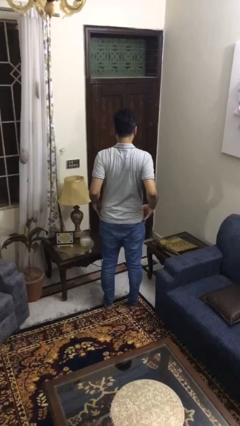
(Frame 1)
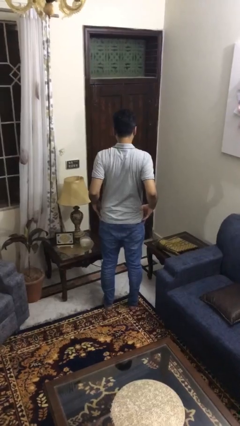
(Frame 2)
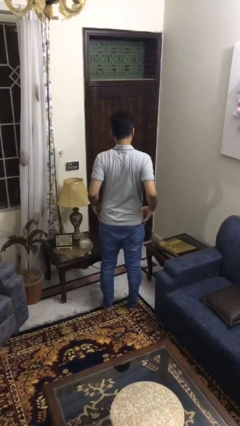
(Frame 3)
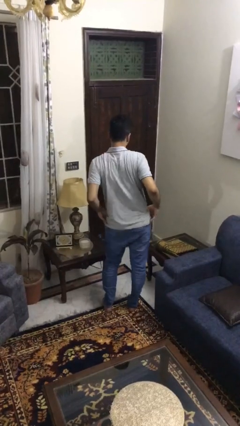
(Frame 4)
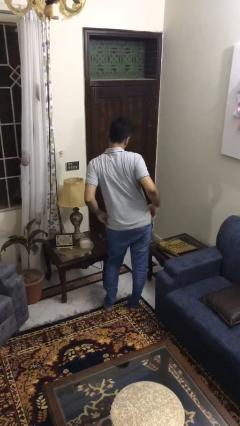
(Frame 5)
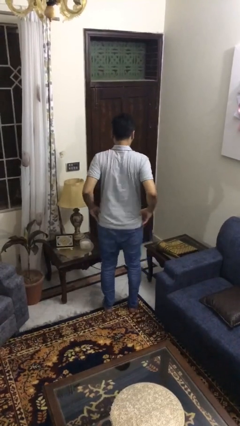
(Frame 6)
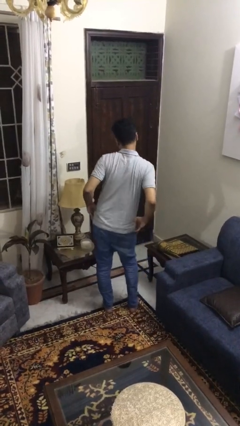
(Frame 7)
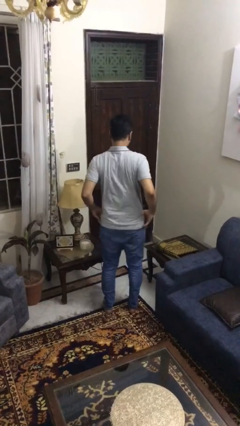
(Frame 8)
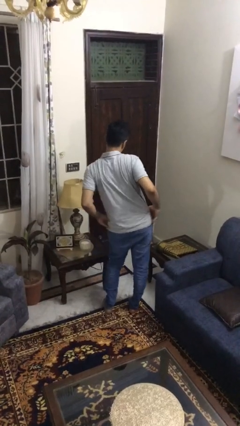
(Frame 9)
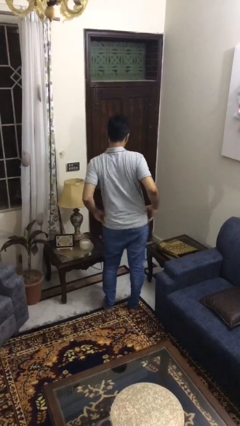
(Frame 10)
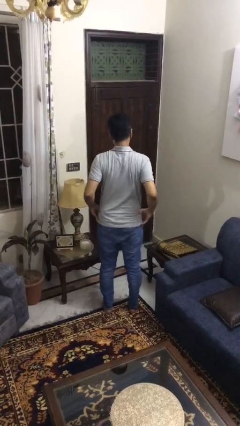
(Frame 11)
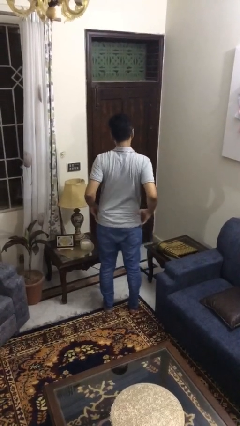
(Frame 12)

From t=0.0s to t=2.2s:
person wiggles hips

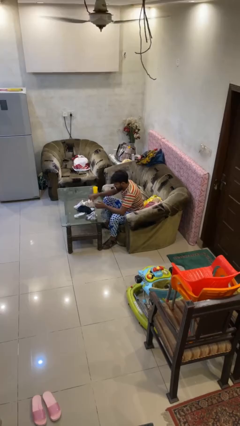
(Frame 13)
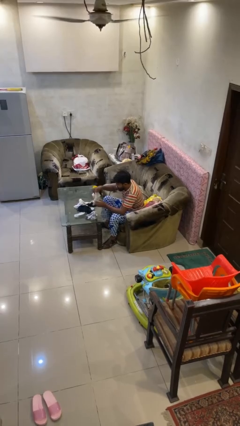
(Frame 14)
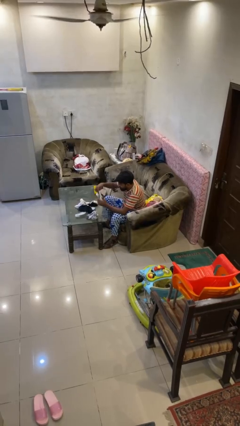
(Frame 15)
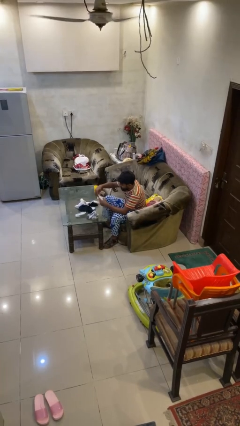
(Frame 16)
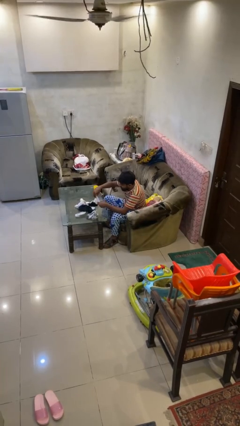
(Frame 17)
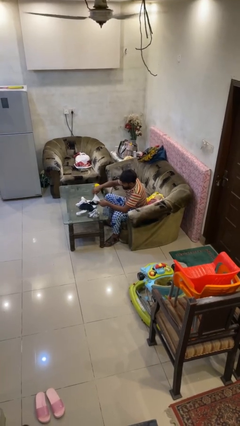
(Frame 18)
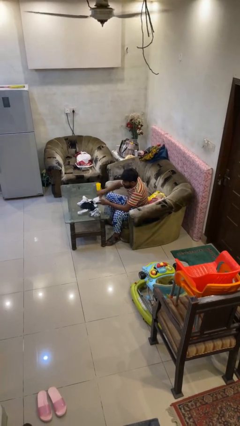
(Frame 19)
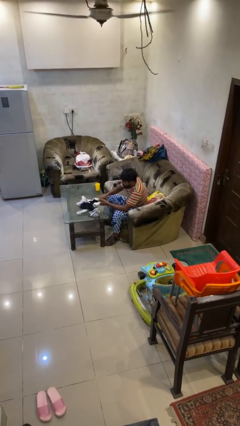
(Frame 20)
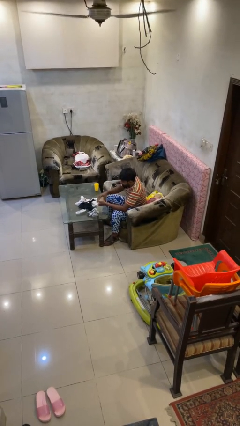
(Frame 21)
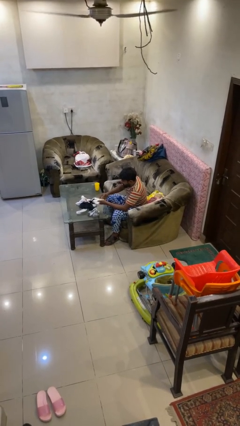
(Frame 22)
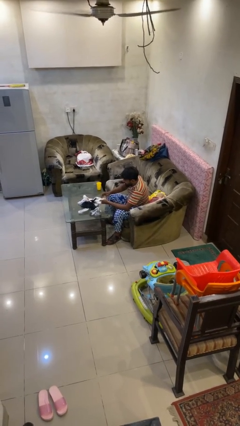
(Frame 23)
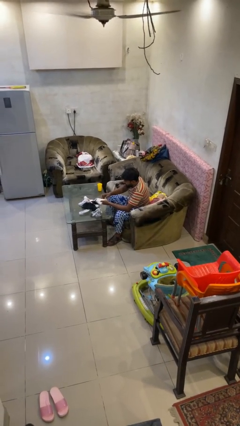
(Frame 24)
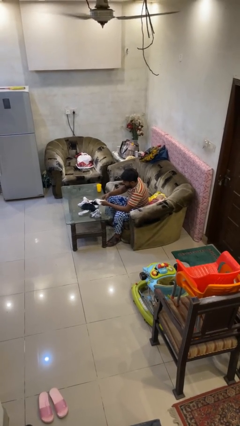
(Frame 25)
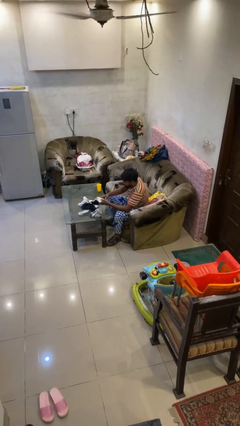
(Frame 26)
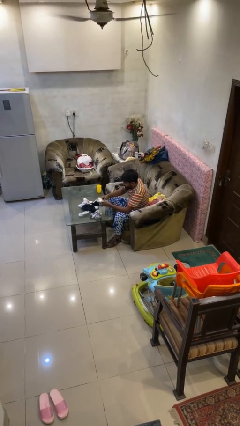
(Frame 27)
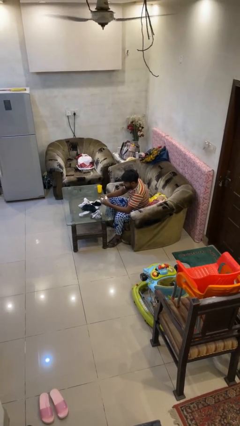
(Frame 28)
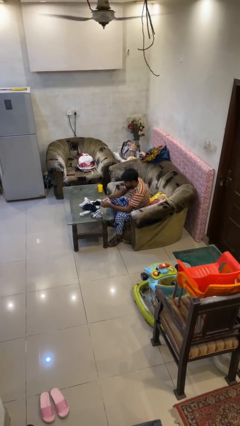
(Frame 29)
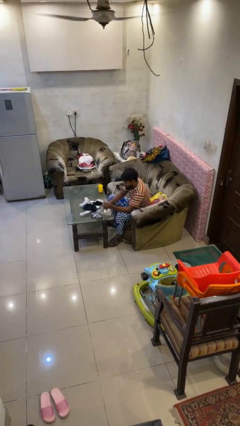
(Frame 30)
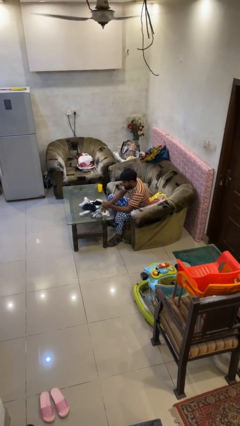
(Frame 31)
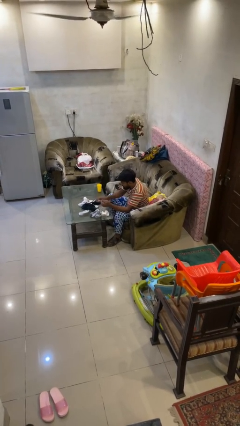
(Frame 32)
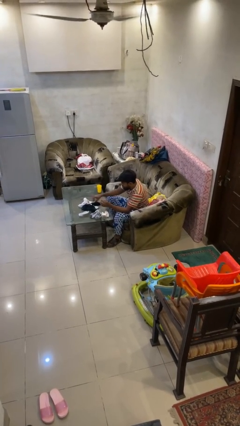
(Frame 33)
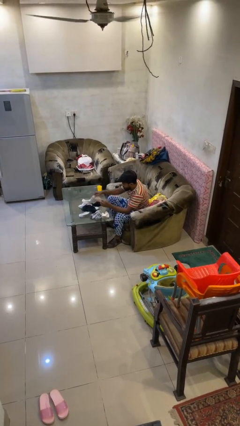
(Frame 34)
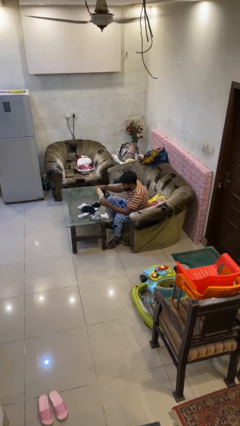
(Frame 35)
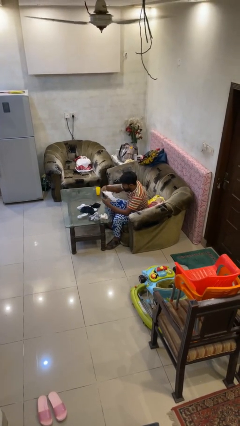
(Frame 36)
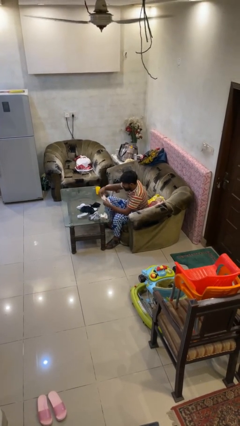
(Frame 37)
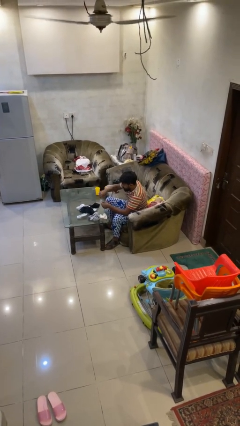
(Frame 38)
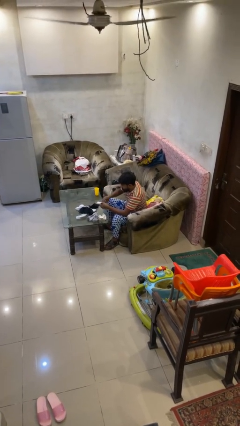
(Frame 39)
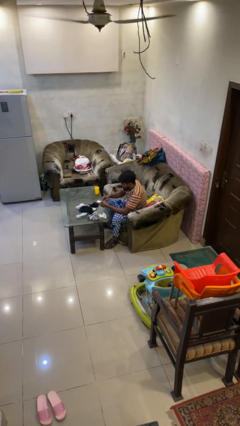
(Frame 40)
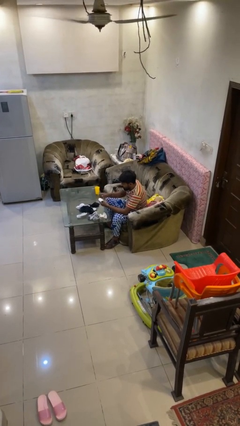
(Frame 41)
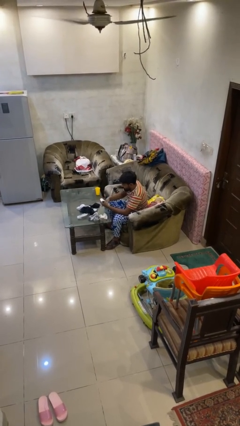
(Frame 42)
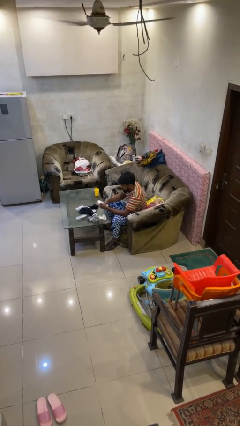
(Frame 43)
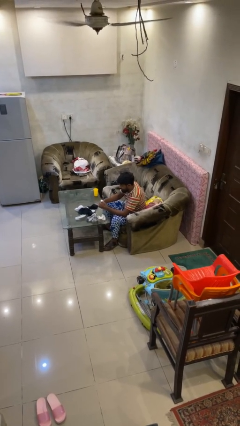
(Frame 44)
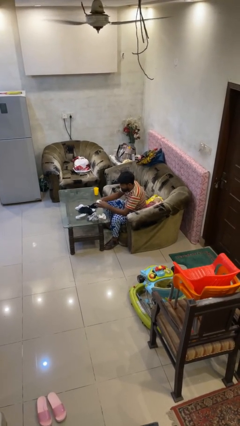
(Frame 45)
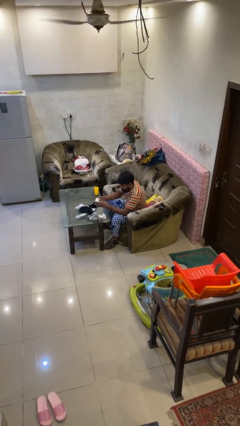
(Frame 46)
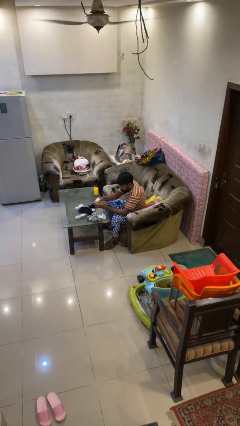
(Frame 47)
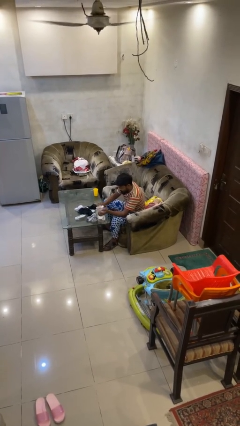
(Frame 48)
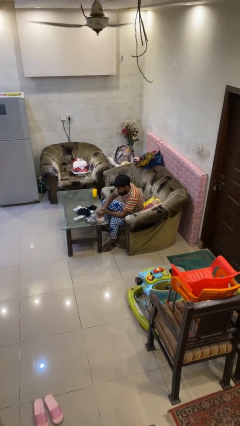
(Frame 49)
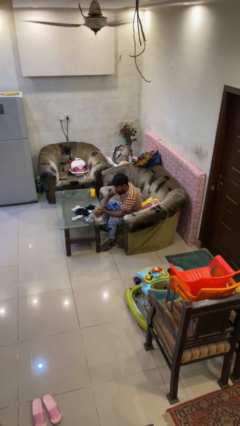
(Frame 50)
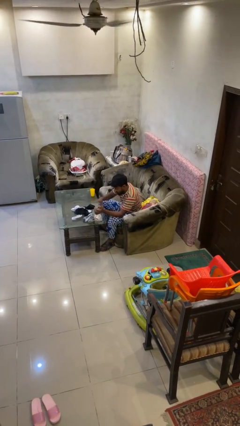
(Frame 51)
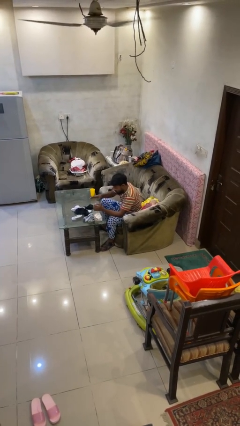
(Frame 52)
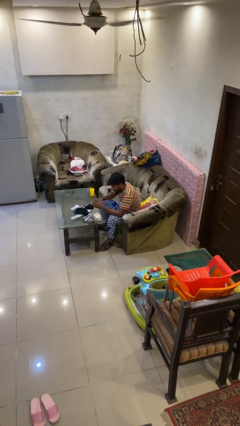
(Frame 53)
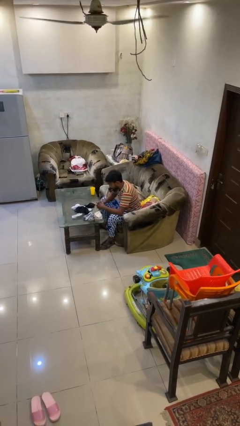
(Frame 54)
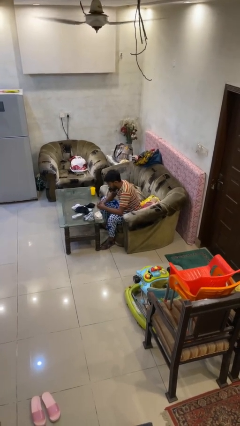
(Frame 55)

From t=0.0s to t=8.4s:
person folds socks

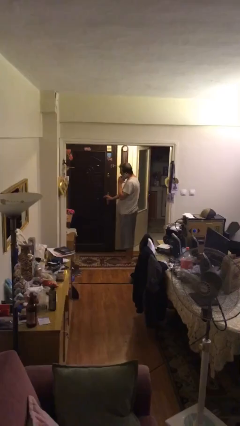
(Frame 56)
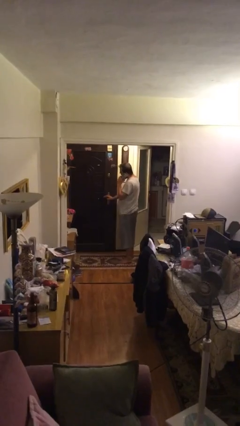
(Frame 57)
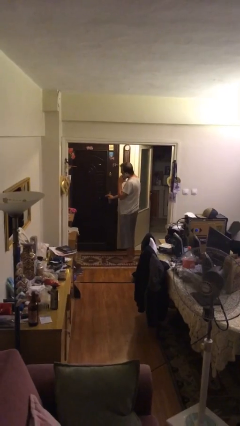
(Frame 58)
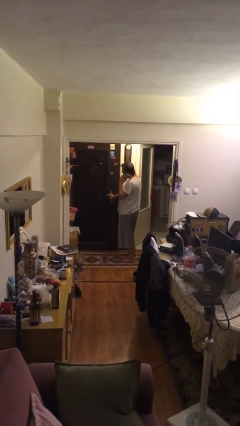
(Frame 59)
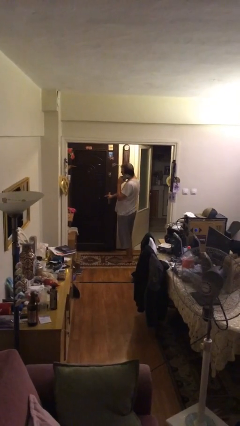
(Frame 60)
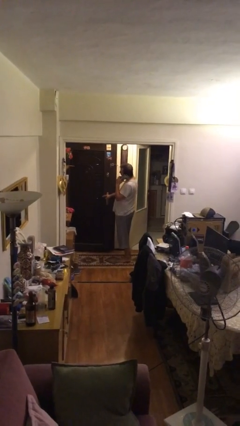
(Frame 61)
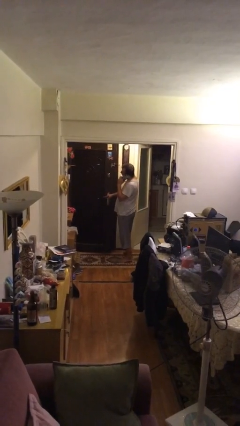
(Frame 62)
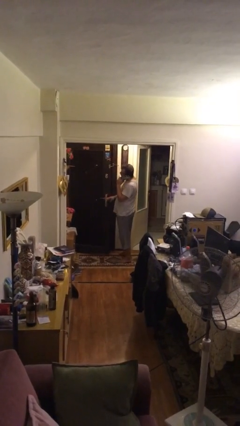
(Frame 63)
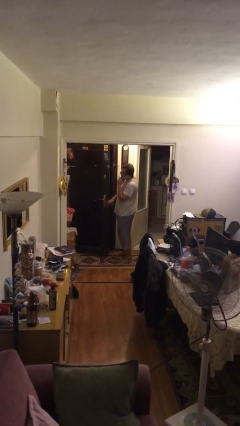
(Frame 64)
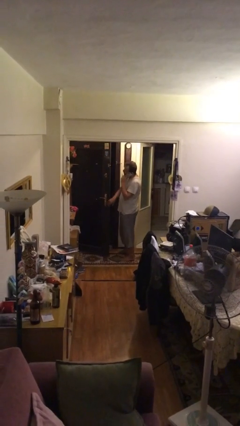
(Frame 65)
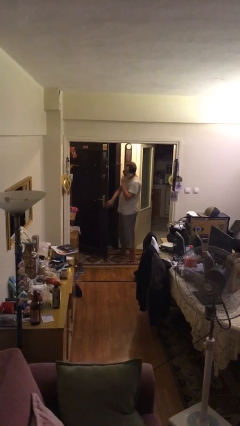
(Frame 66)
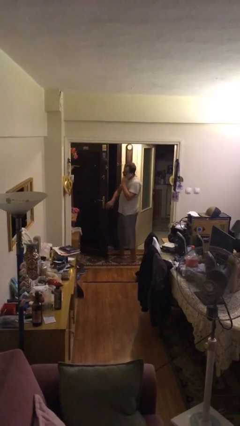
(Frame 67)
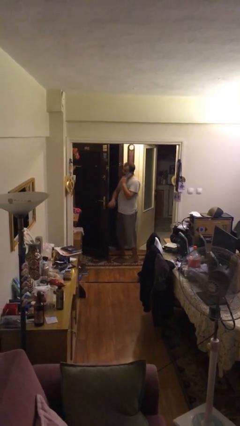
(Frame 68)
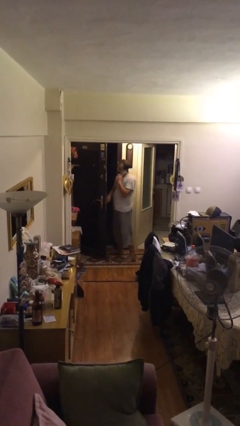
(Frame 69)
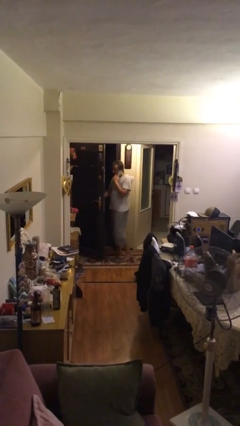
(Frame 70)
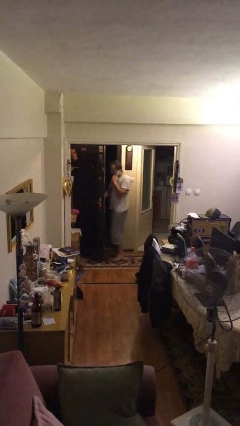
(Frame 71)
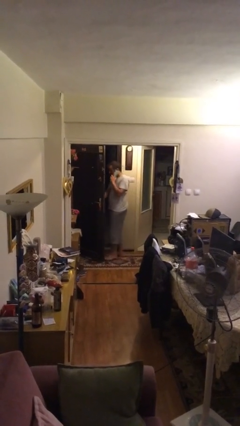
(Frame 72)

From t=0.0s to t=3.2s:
person opens facility door

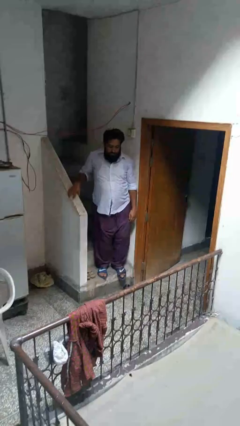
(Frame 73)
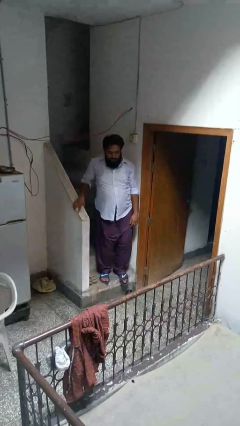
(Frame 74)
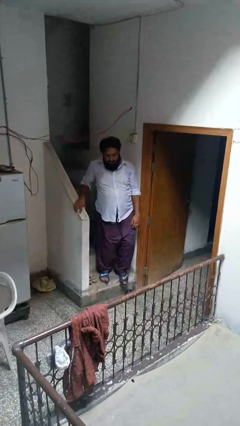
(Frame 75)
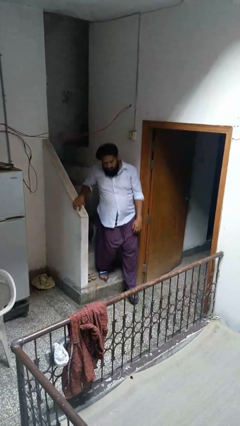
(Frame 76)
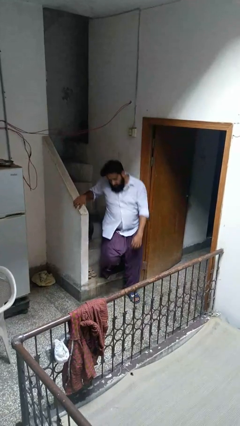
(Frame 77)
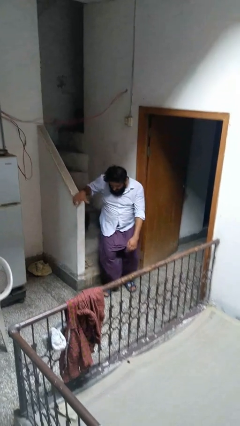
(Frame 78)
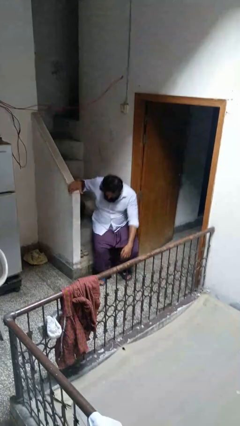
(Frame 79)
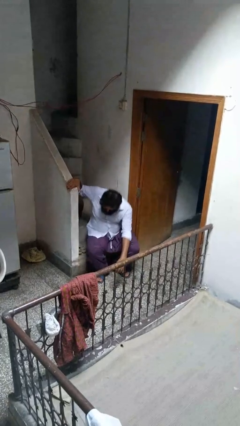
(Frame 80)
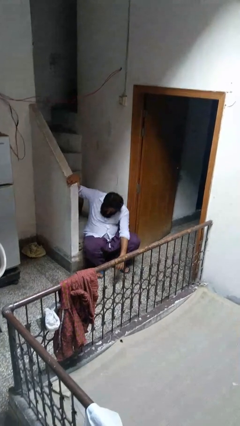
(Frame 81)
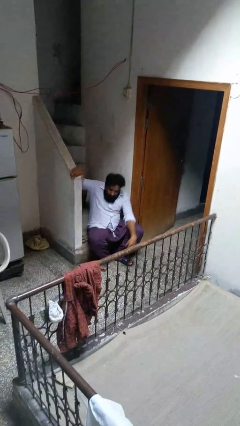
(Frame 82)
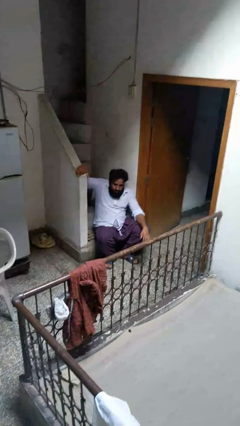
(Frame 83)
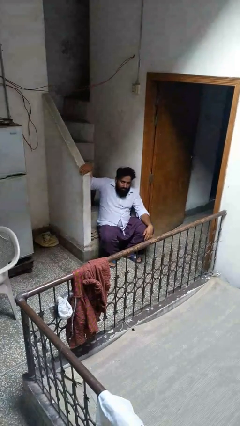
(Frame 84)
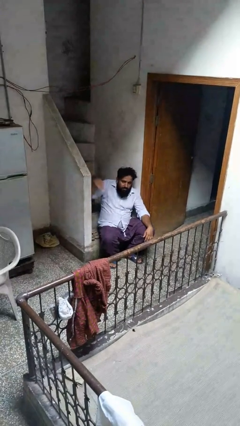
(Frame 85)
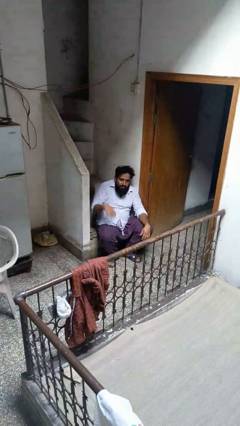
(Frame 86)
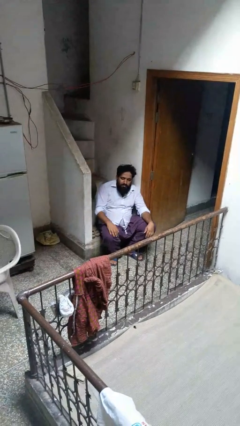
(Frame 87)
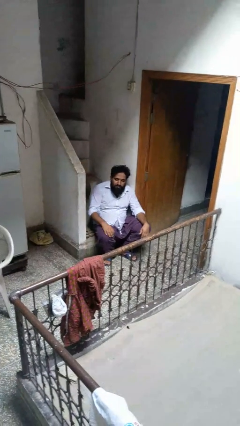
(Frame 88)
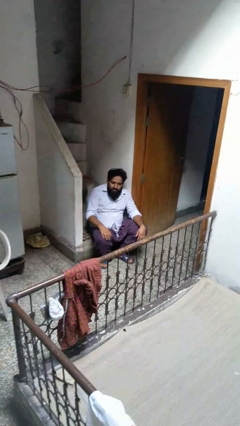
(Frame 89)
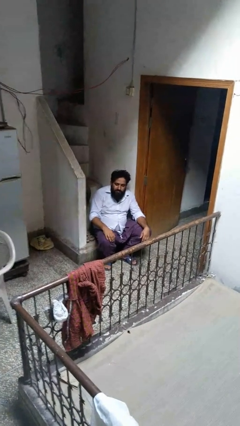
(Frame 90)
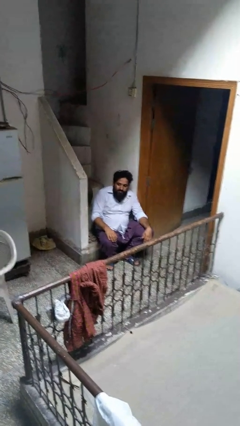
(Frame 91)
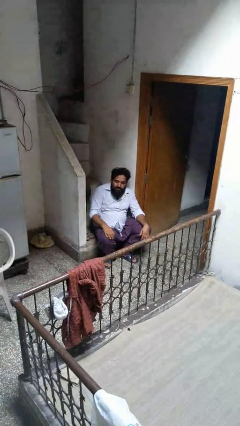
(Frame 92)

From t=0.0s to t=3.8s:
person trips on stair

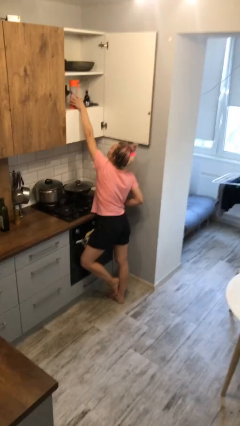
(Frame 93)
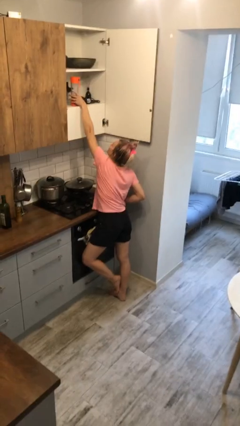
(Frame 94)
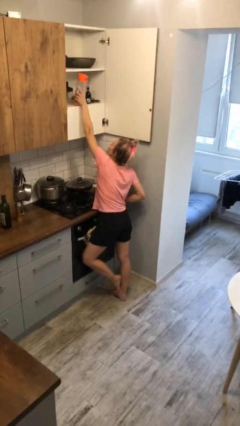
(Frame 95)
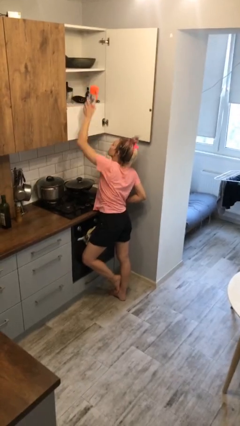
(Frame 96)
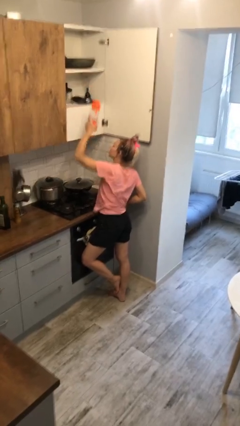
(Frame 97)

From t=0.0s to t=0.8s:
person picks up object from cabinet
